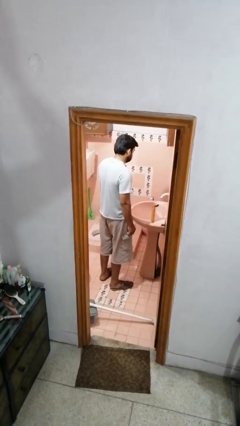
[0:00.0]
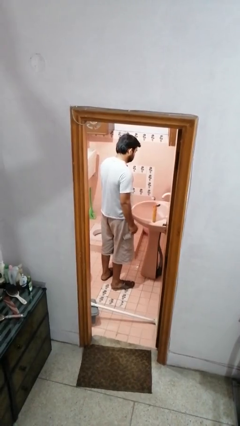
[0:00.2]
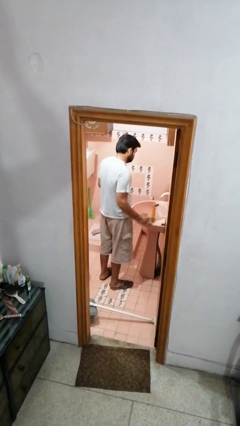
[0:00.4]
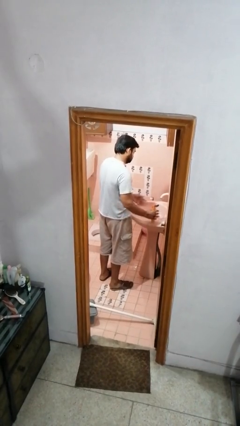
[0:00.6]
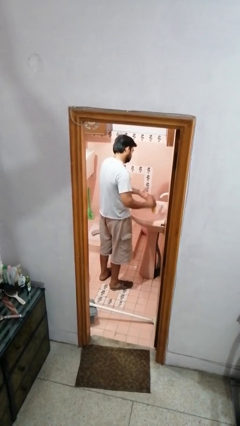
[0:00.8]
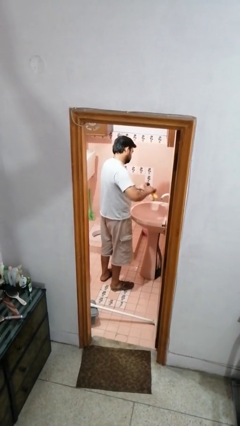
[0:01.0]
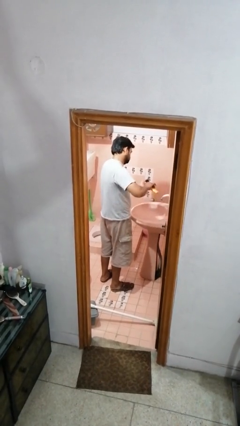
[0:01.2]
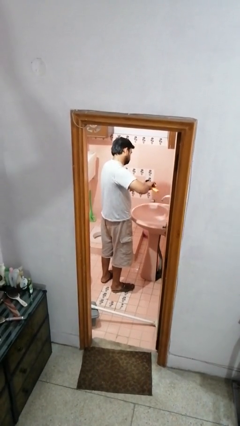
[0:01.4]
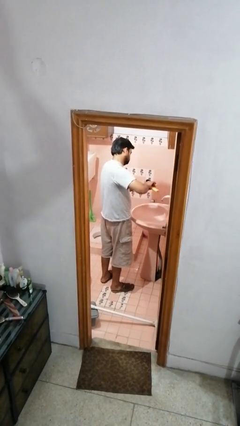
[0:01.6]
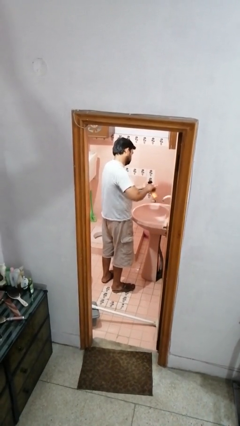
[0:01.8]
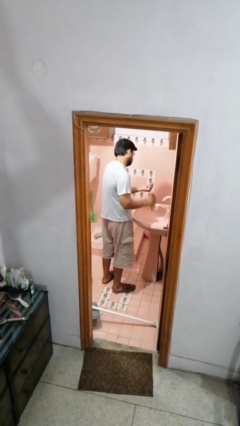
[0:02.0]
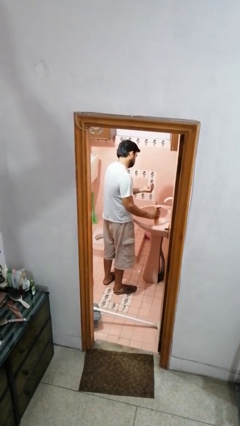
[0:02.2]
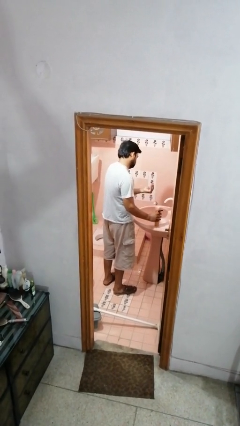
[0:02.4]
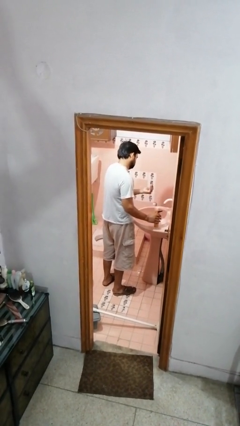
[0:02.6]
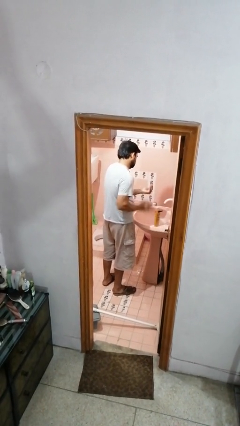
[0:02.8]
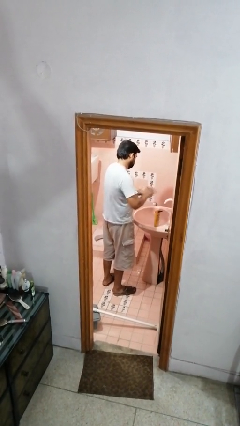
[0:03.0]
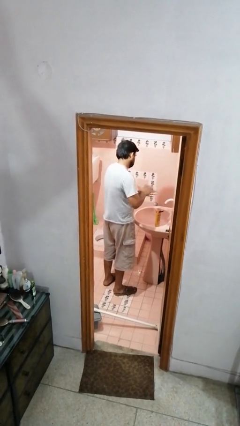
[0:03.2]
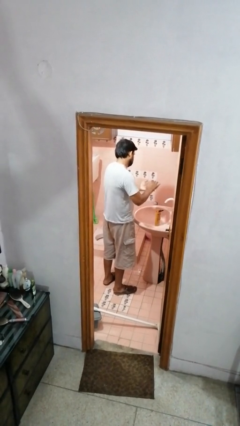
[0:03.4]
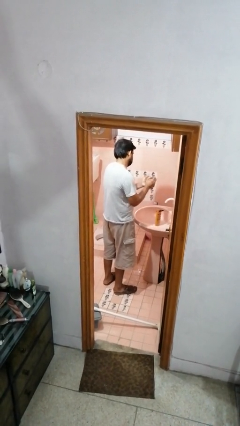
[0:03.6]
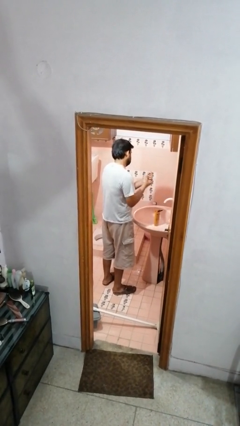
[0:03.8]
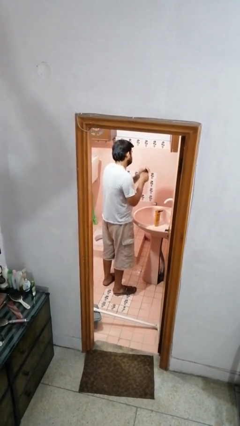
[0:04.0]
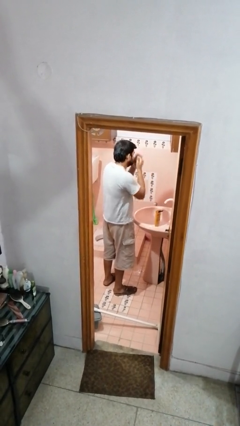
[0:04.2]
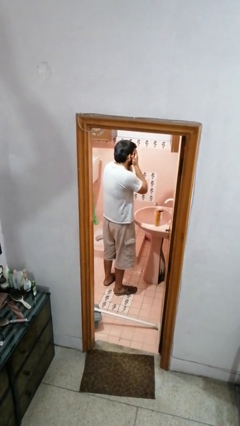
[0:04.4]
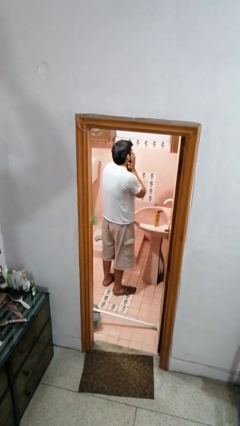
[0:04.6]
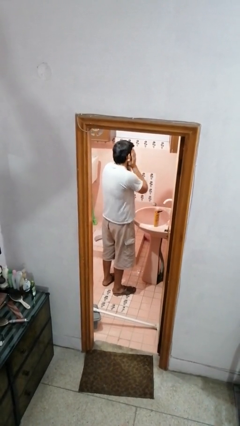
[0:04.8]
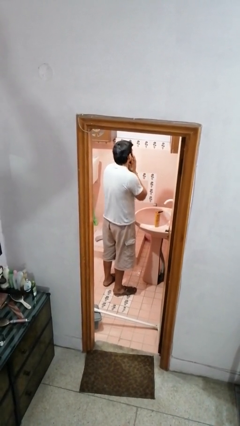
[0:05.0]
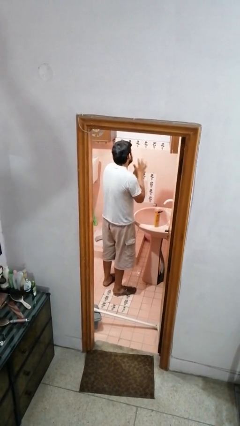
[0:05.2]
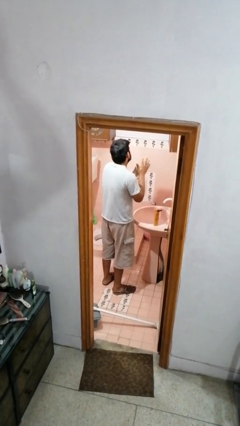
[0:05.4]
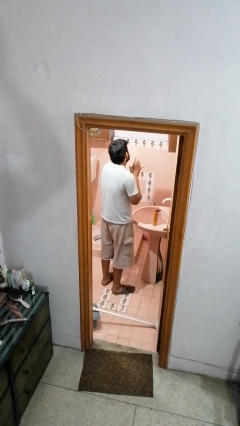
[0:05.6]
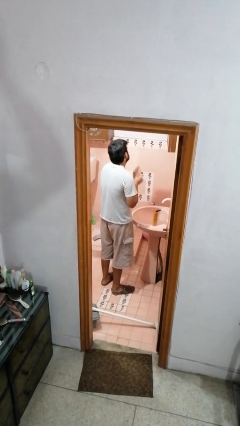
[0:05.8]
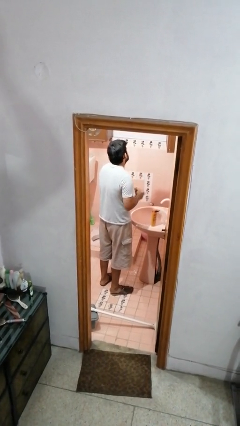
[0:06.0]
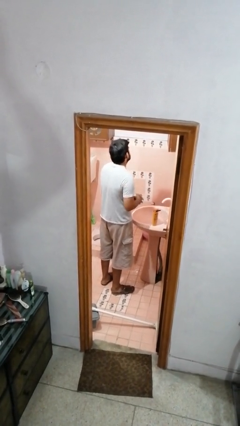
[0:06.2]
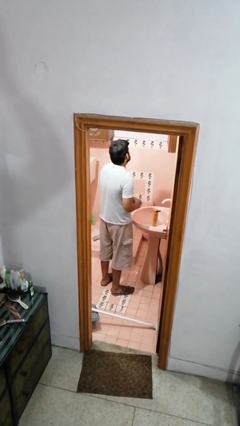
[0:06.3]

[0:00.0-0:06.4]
person applies facial moisturizer

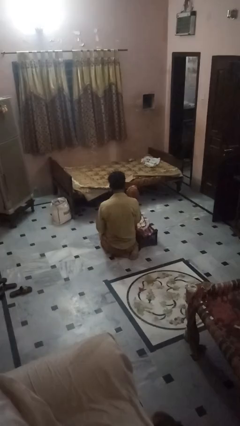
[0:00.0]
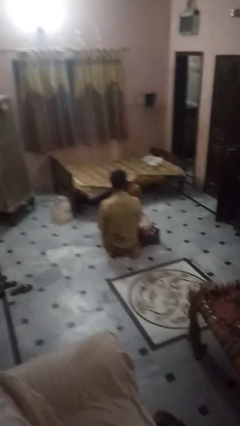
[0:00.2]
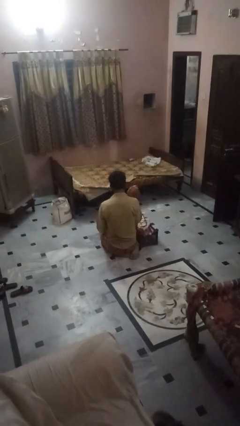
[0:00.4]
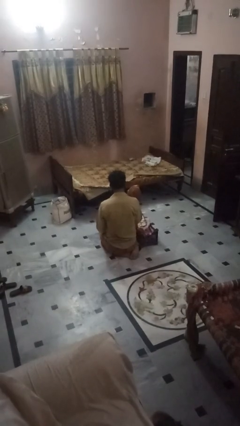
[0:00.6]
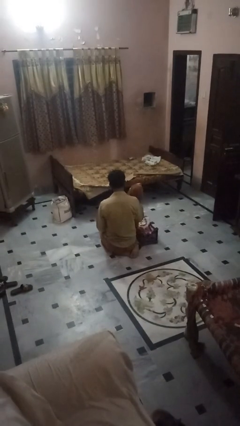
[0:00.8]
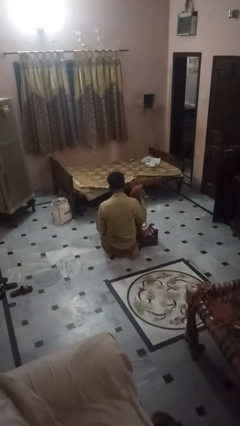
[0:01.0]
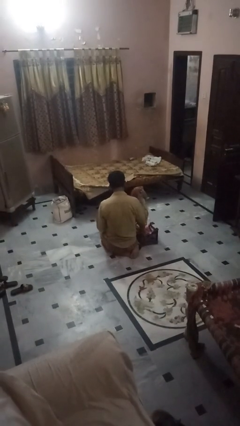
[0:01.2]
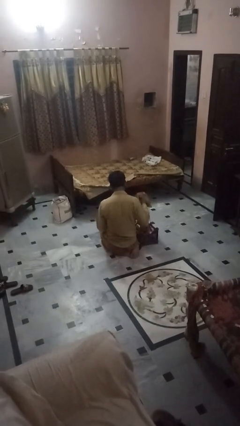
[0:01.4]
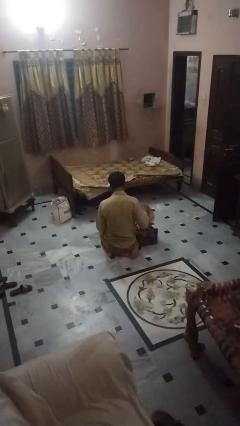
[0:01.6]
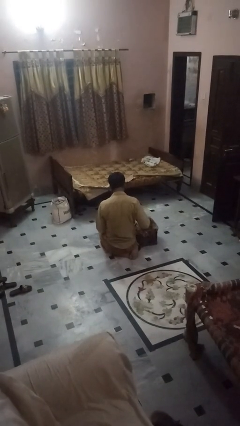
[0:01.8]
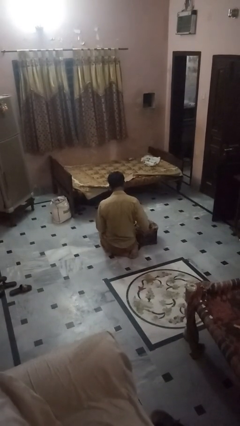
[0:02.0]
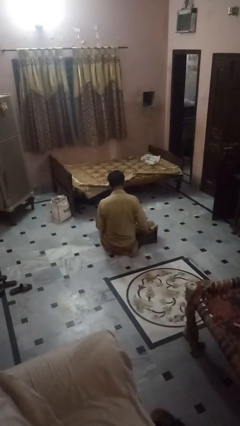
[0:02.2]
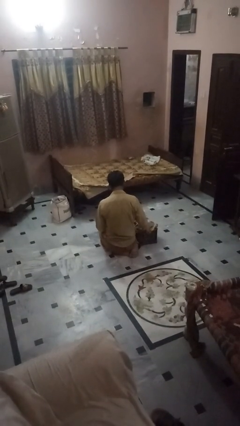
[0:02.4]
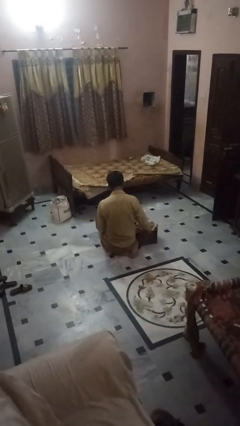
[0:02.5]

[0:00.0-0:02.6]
person puts object into bag

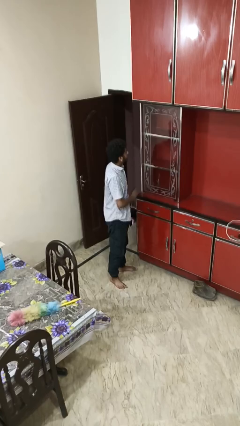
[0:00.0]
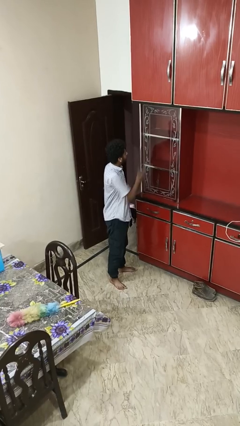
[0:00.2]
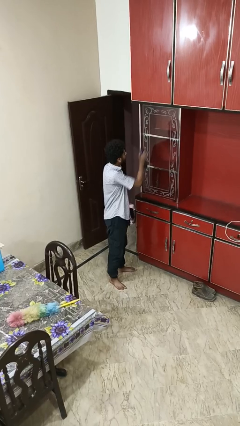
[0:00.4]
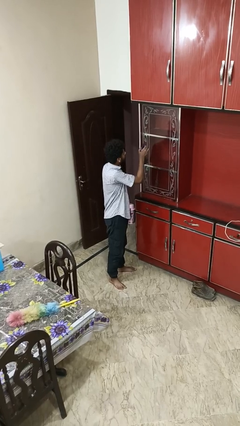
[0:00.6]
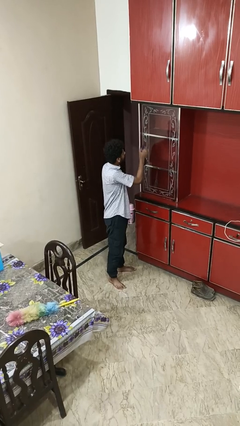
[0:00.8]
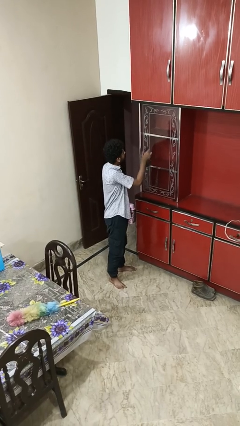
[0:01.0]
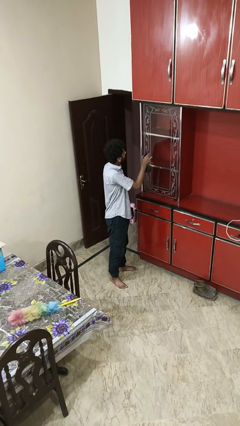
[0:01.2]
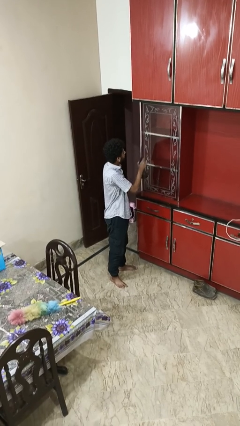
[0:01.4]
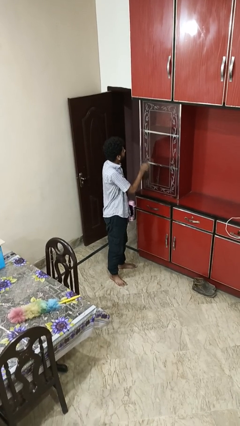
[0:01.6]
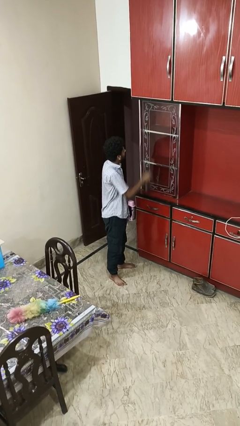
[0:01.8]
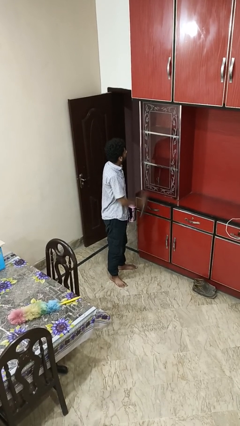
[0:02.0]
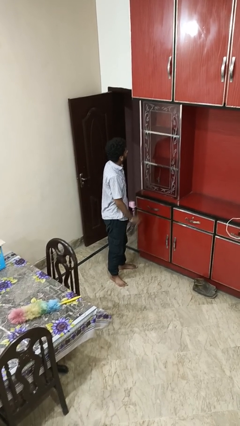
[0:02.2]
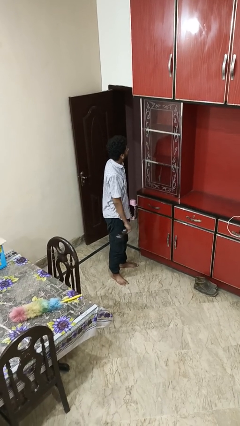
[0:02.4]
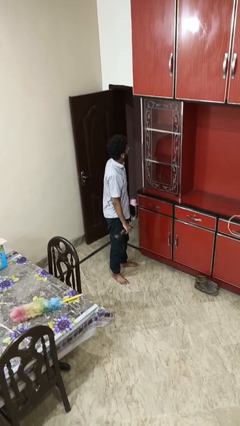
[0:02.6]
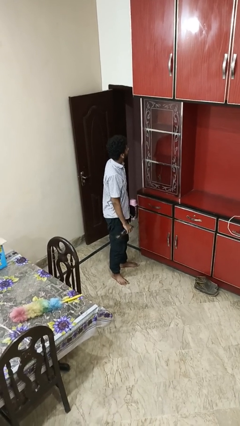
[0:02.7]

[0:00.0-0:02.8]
person sprays from bottle

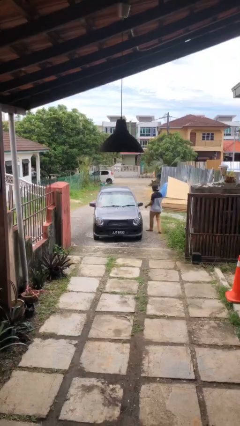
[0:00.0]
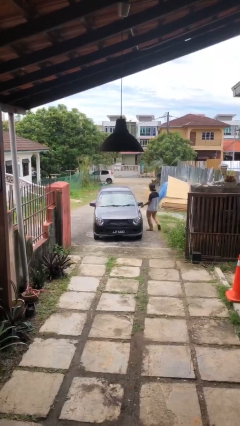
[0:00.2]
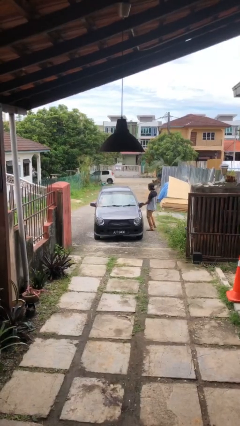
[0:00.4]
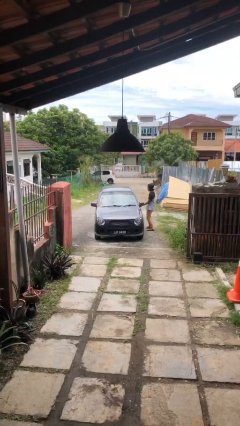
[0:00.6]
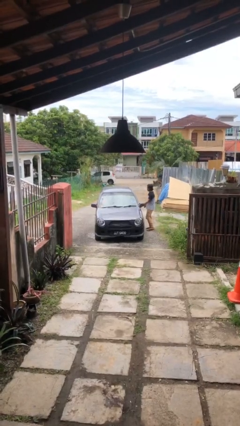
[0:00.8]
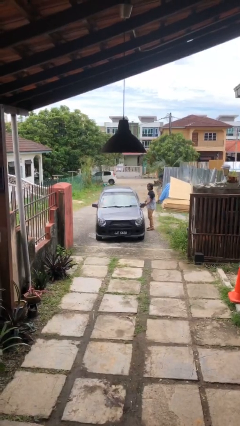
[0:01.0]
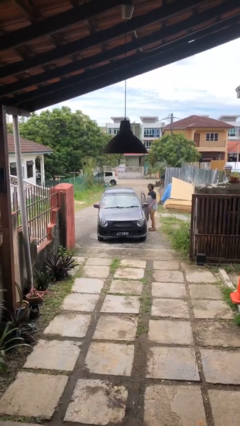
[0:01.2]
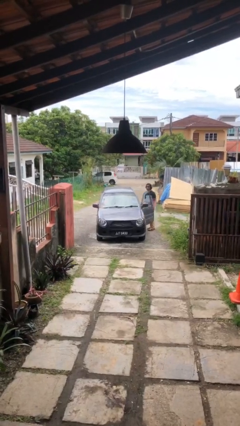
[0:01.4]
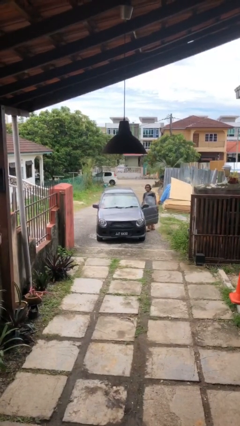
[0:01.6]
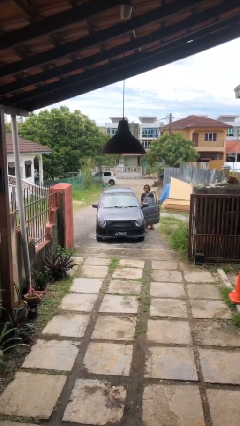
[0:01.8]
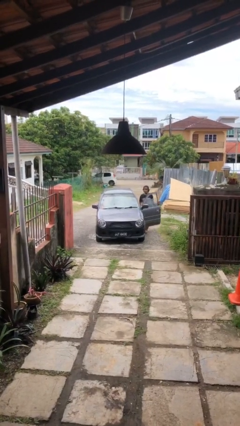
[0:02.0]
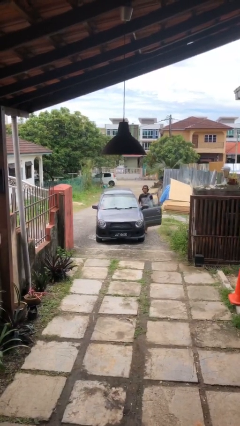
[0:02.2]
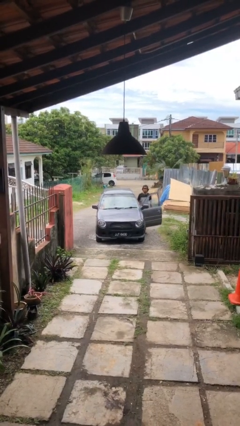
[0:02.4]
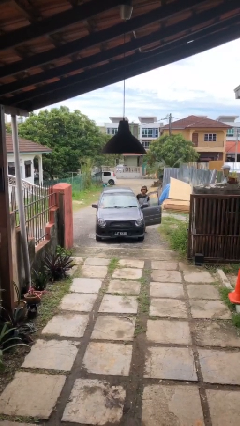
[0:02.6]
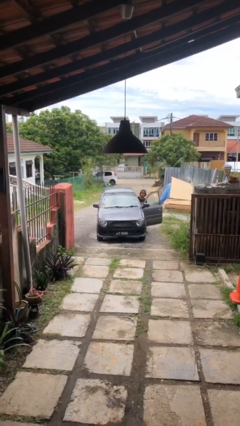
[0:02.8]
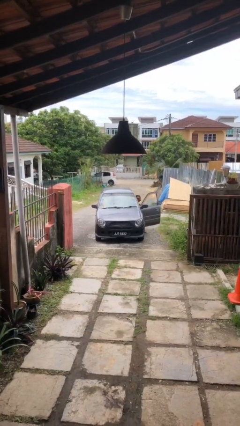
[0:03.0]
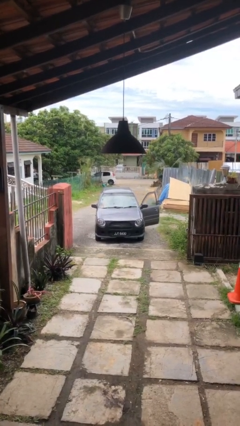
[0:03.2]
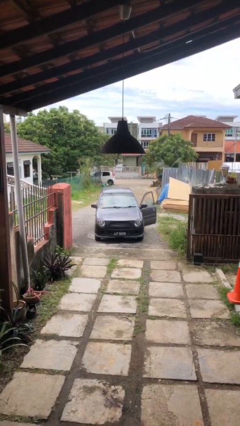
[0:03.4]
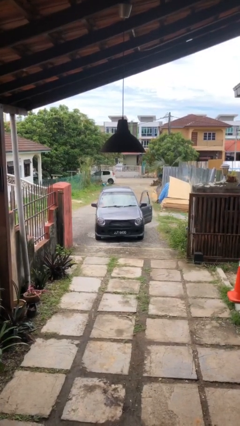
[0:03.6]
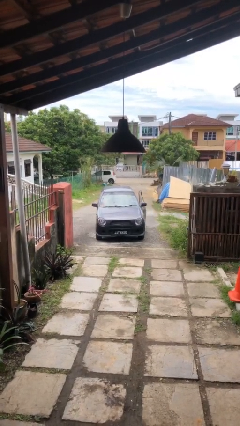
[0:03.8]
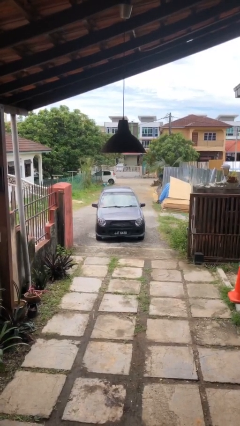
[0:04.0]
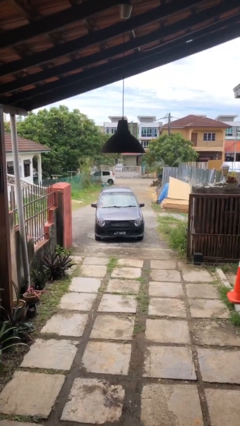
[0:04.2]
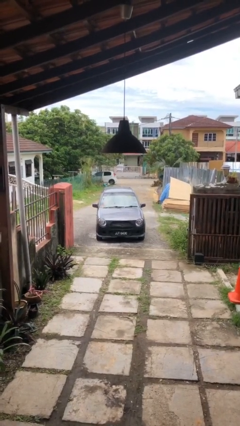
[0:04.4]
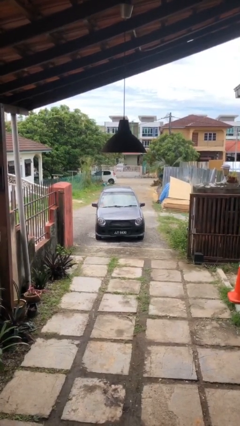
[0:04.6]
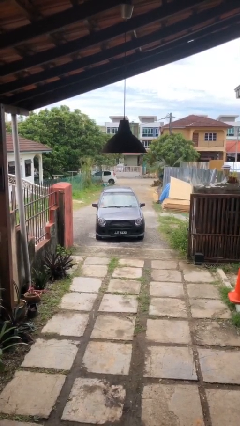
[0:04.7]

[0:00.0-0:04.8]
car picks up person

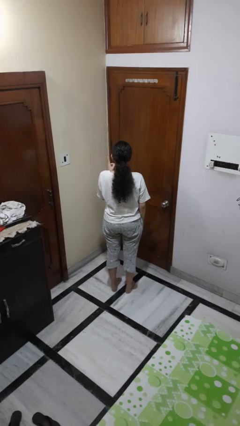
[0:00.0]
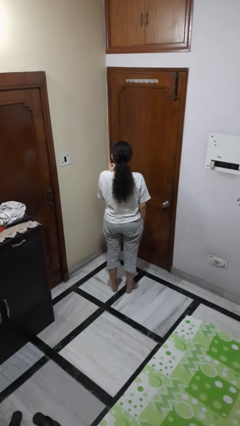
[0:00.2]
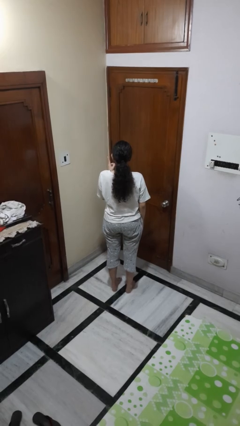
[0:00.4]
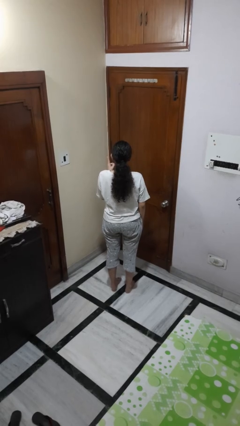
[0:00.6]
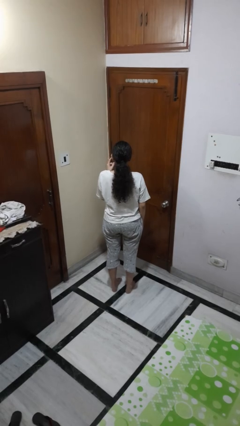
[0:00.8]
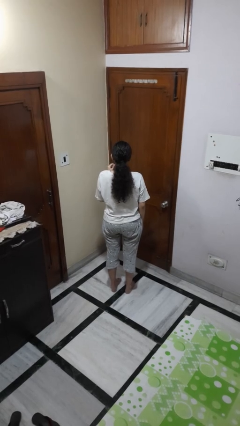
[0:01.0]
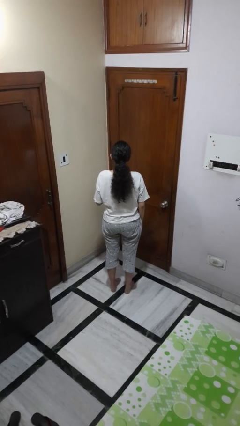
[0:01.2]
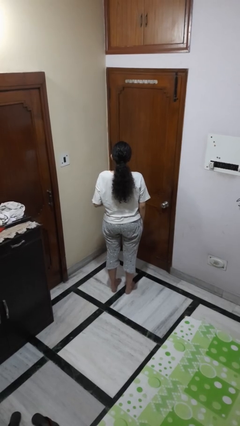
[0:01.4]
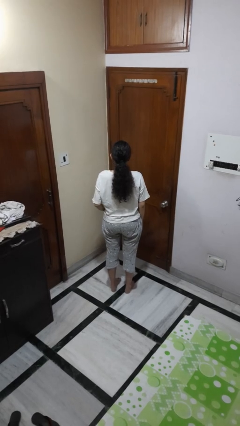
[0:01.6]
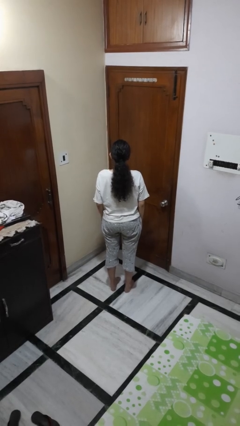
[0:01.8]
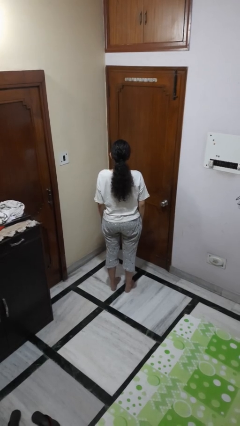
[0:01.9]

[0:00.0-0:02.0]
person gestures number one
